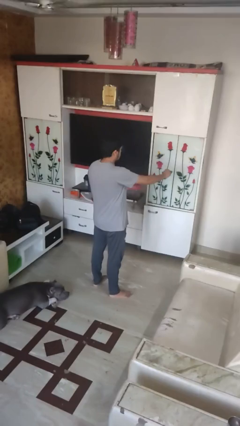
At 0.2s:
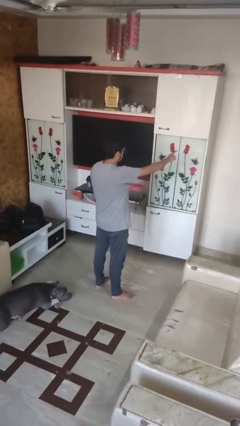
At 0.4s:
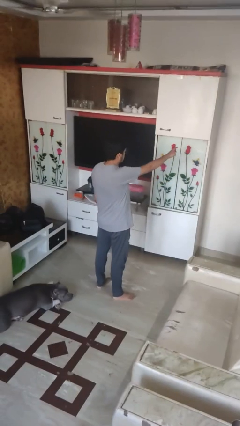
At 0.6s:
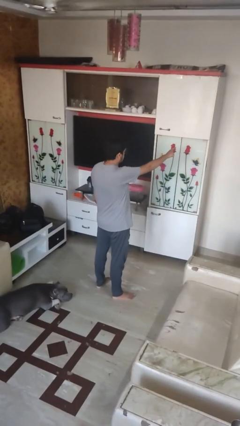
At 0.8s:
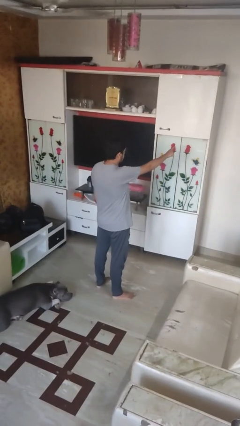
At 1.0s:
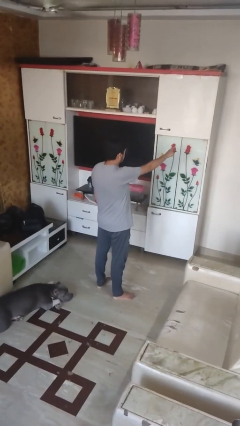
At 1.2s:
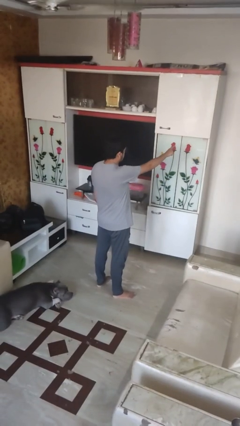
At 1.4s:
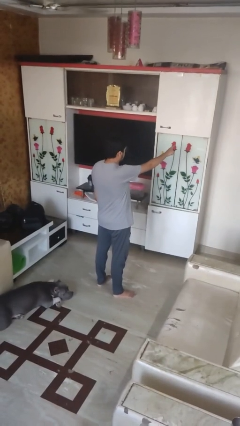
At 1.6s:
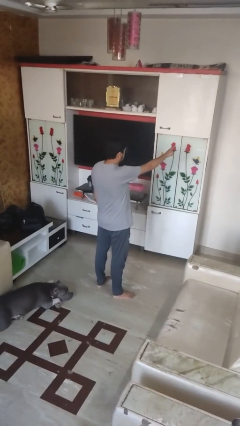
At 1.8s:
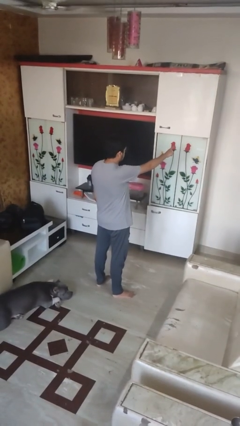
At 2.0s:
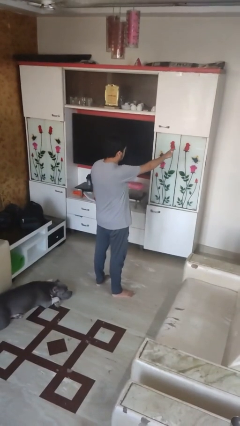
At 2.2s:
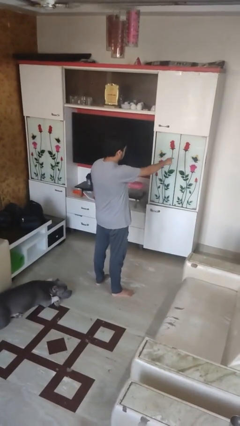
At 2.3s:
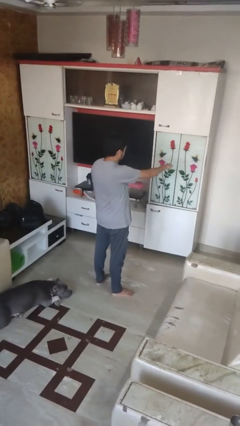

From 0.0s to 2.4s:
person points at person

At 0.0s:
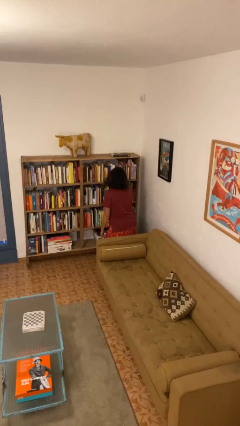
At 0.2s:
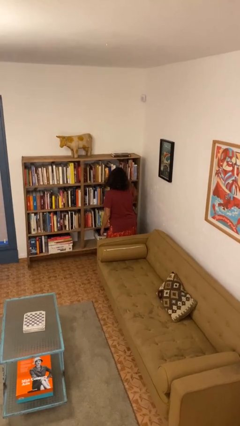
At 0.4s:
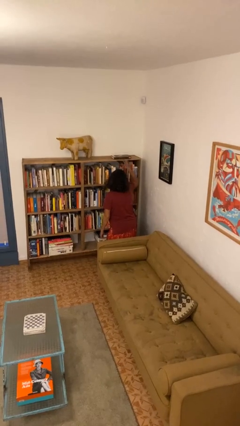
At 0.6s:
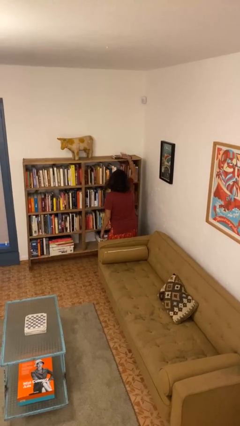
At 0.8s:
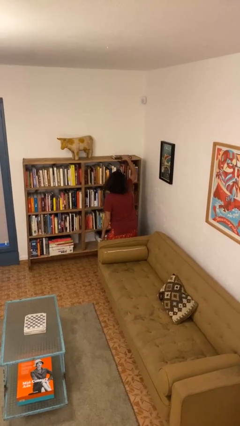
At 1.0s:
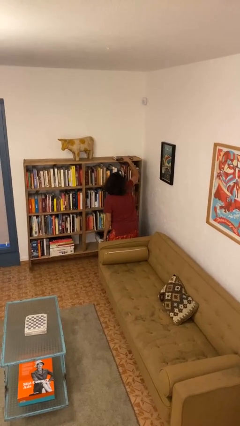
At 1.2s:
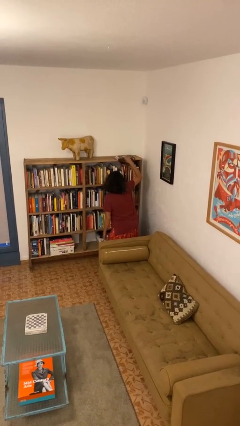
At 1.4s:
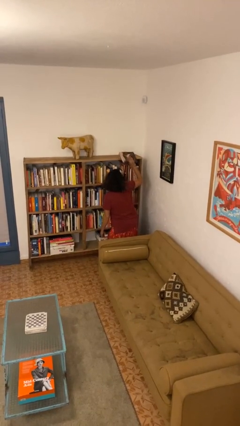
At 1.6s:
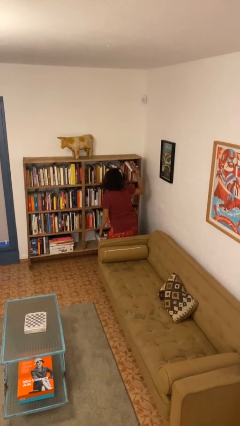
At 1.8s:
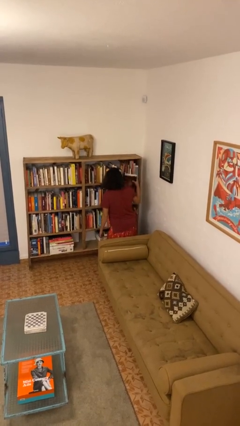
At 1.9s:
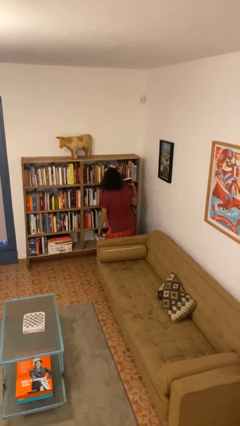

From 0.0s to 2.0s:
person picks up object from shelf

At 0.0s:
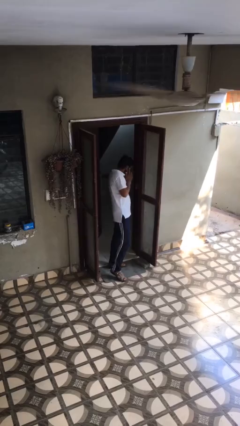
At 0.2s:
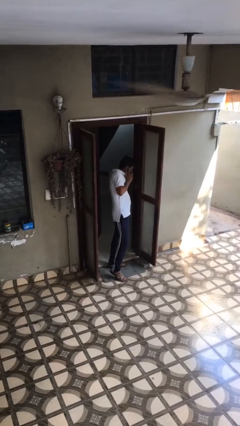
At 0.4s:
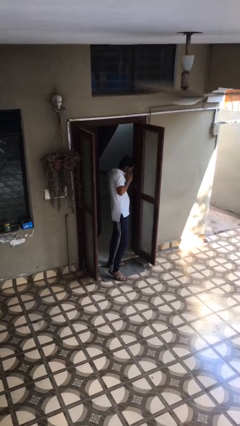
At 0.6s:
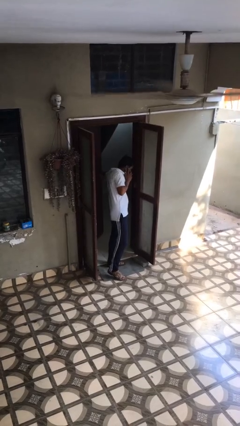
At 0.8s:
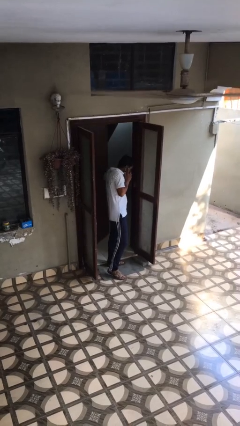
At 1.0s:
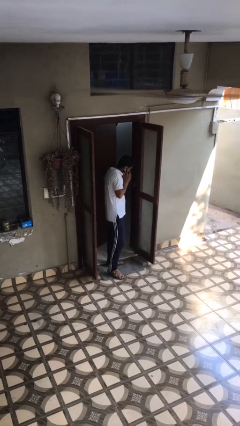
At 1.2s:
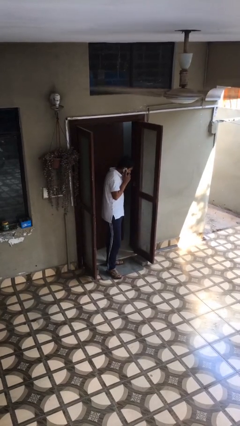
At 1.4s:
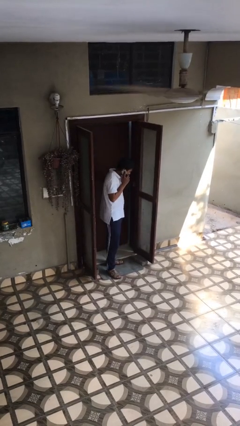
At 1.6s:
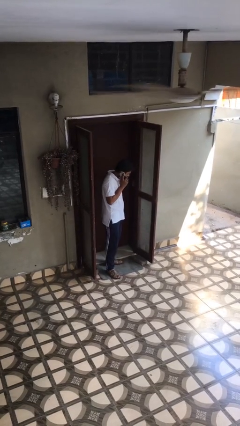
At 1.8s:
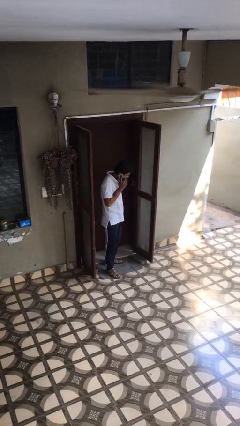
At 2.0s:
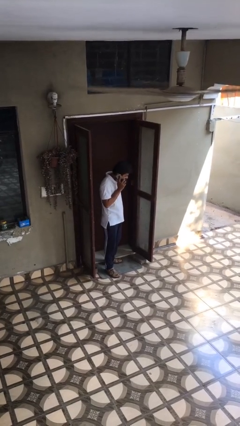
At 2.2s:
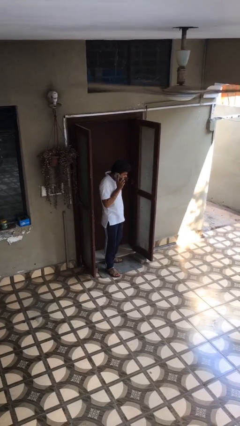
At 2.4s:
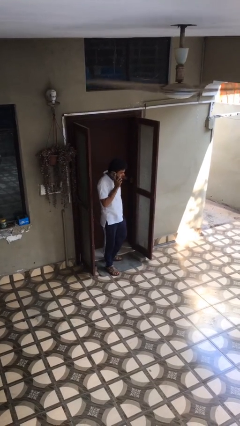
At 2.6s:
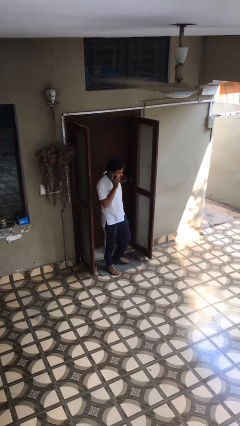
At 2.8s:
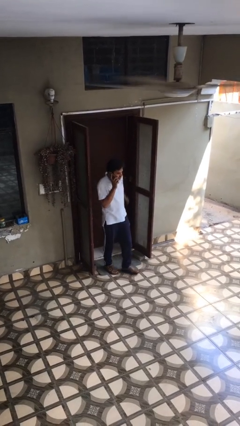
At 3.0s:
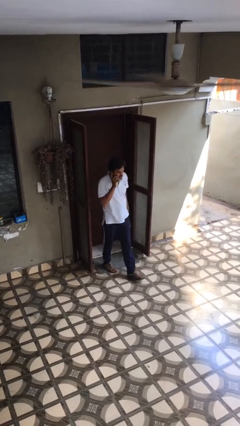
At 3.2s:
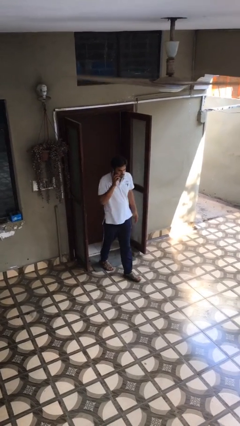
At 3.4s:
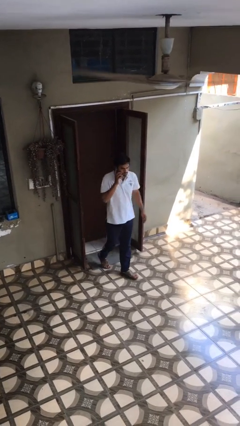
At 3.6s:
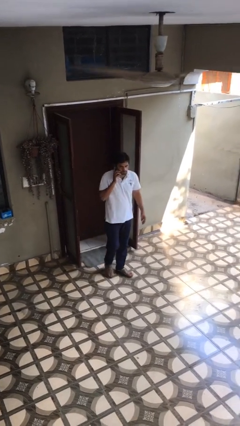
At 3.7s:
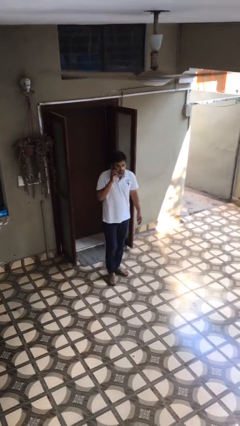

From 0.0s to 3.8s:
person closes facility door

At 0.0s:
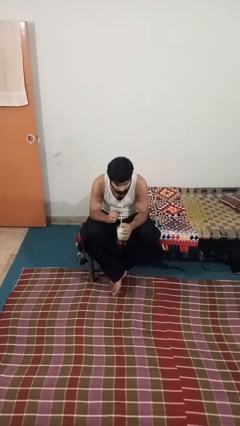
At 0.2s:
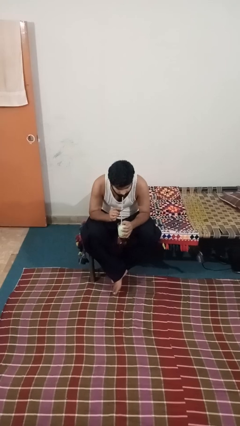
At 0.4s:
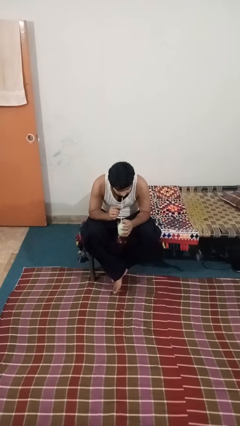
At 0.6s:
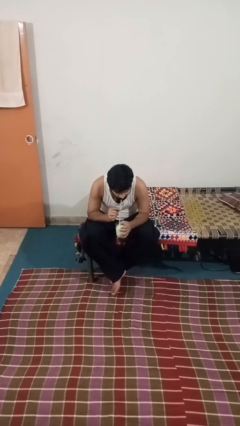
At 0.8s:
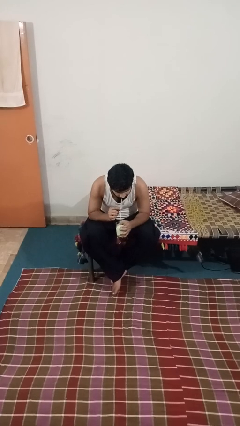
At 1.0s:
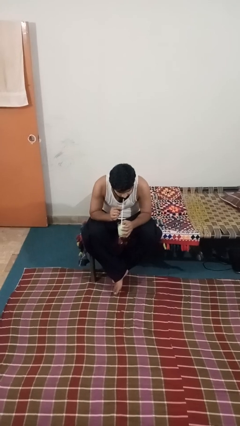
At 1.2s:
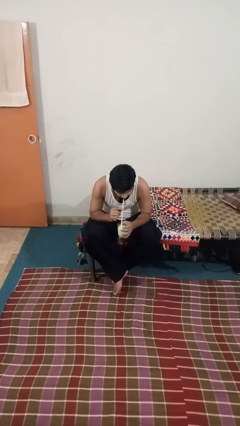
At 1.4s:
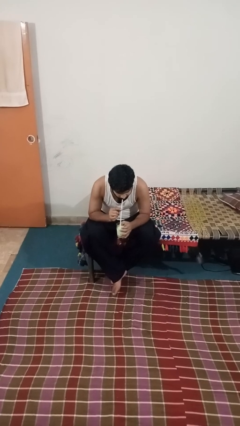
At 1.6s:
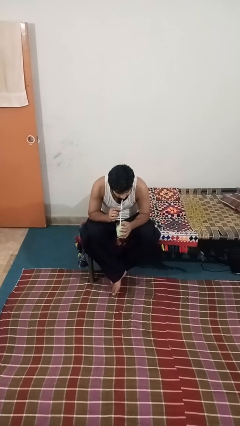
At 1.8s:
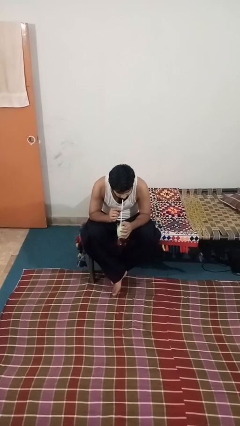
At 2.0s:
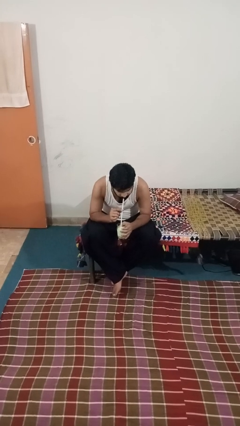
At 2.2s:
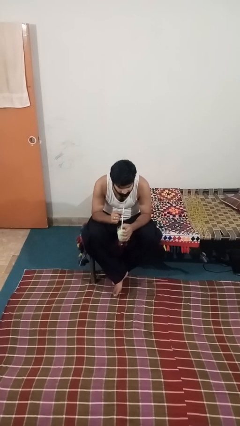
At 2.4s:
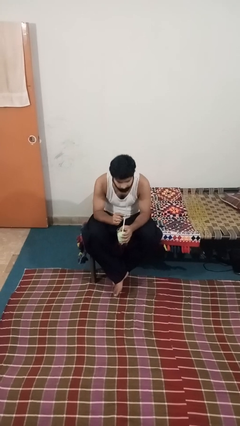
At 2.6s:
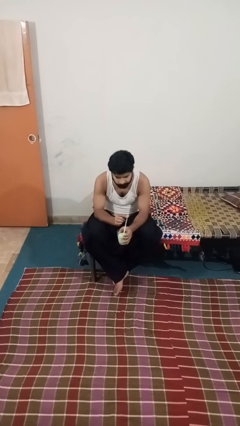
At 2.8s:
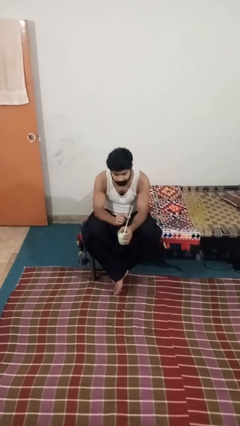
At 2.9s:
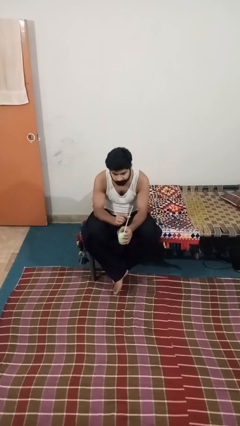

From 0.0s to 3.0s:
person drinks from straw

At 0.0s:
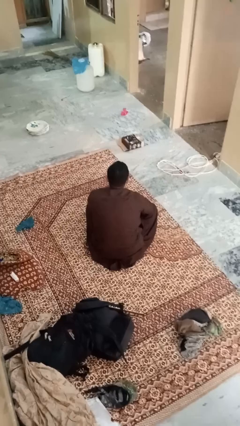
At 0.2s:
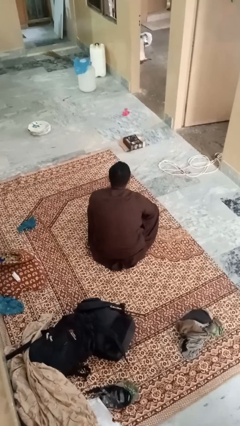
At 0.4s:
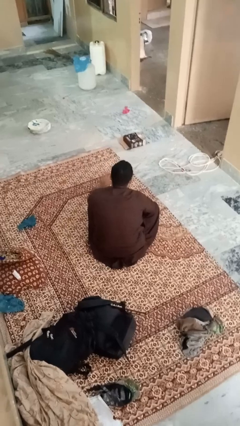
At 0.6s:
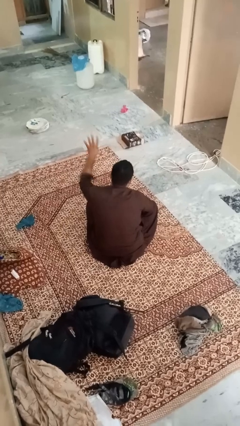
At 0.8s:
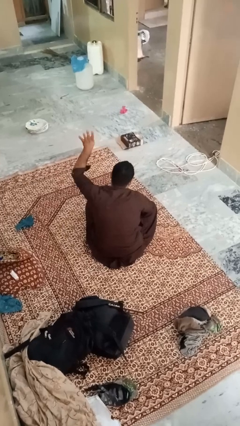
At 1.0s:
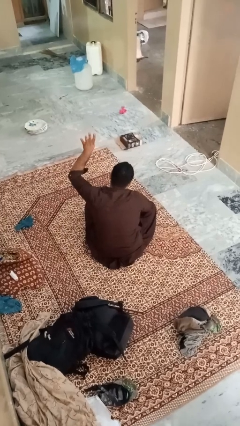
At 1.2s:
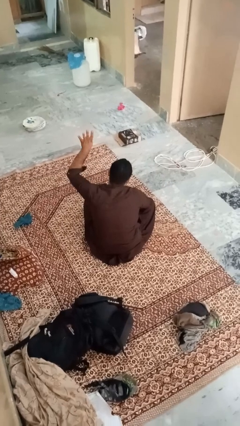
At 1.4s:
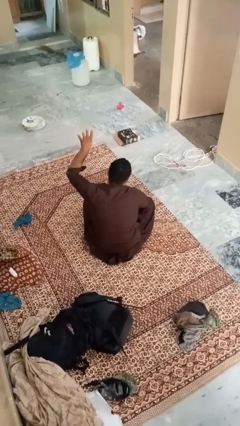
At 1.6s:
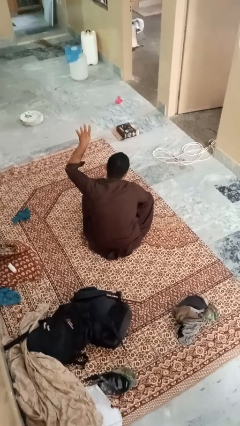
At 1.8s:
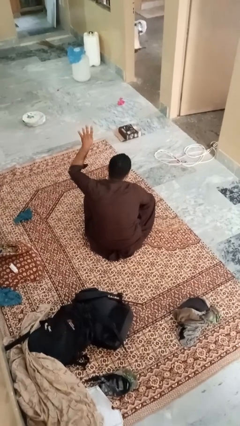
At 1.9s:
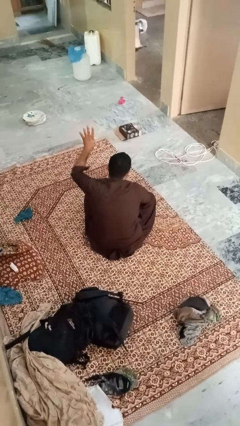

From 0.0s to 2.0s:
person gestures number four

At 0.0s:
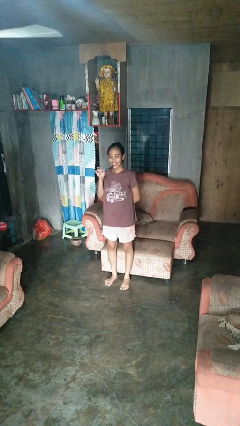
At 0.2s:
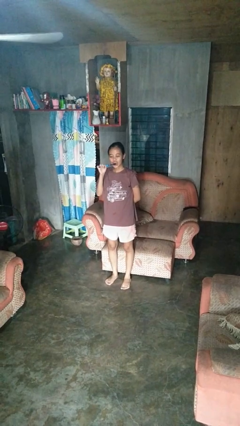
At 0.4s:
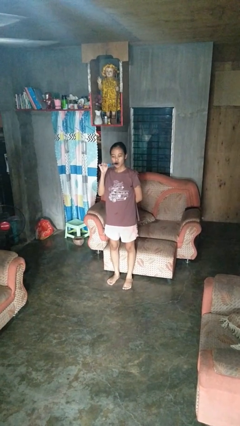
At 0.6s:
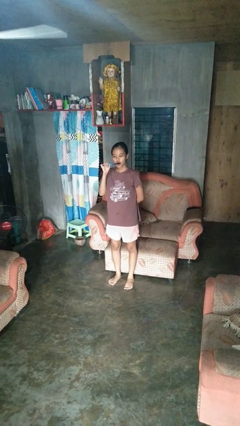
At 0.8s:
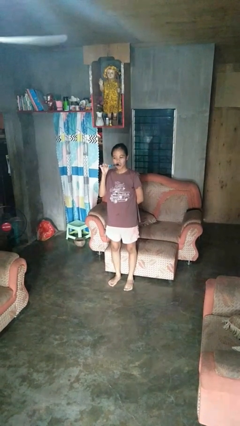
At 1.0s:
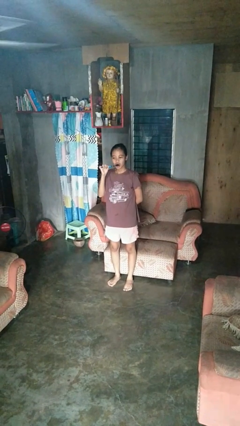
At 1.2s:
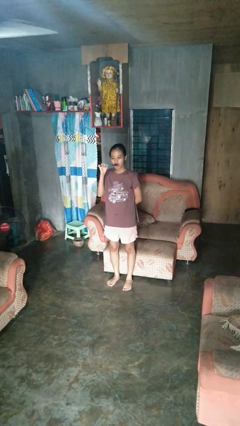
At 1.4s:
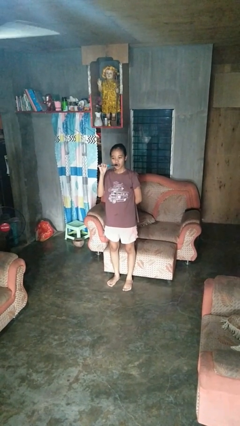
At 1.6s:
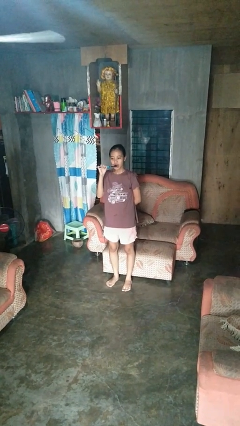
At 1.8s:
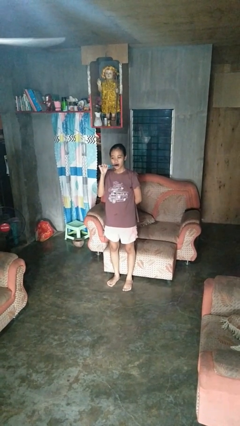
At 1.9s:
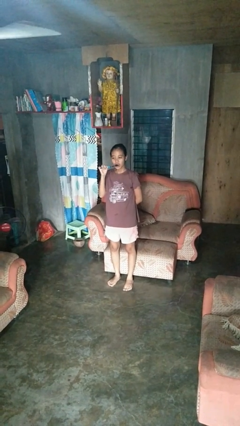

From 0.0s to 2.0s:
person brushes teeth

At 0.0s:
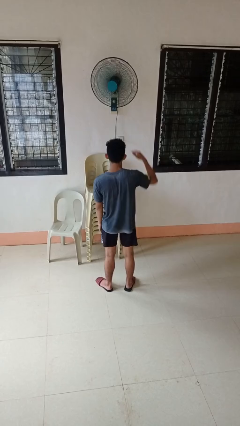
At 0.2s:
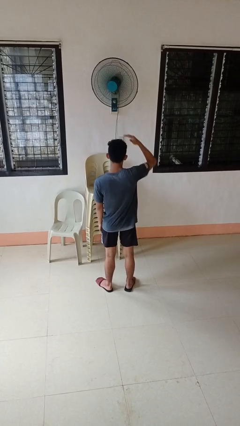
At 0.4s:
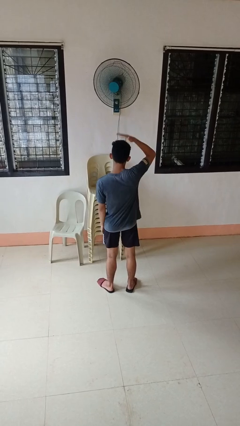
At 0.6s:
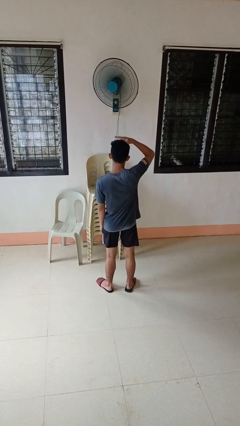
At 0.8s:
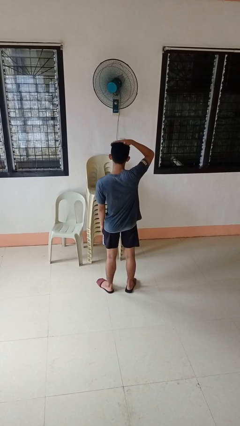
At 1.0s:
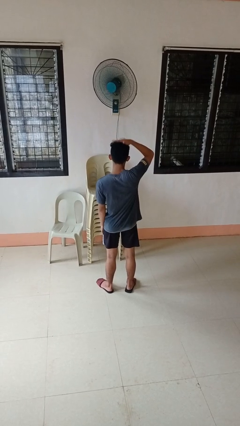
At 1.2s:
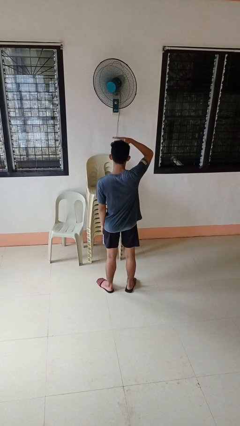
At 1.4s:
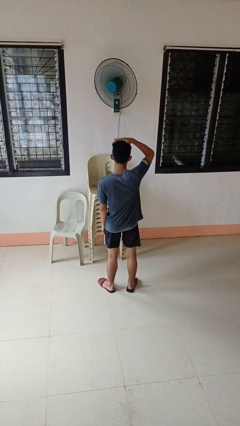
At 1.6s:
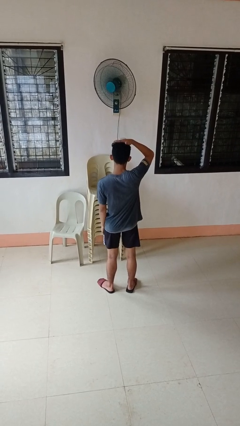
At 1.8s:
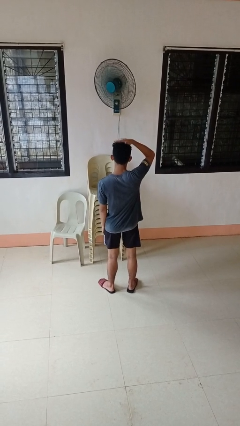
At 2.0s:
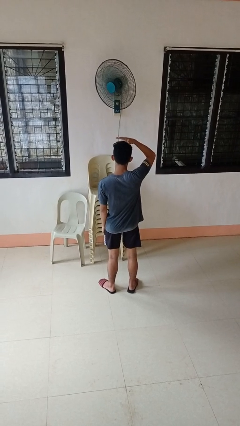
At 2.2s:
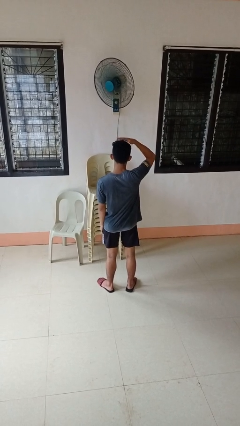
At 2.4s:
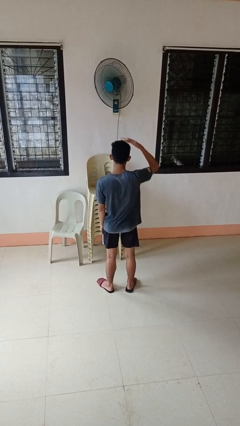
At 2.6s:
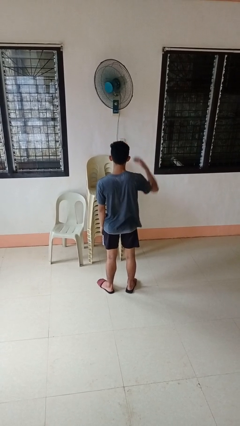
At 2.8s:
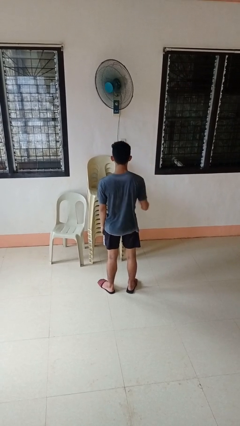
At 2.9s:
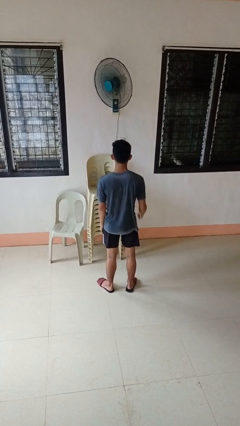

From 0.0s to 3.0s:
person pats head
